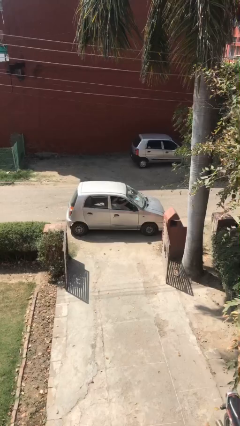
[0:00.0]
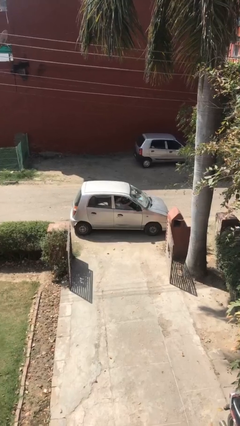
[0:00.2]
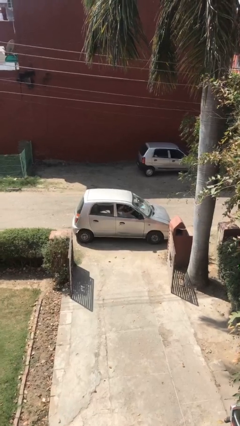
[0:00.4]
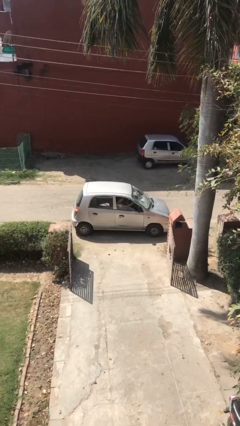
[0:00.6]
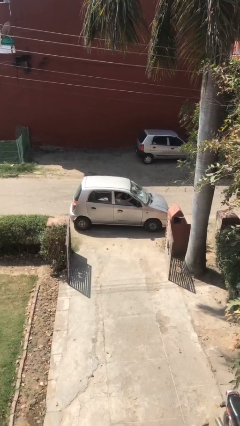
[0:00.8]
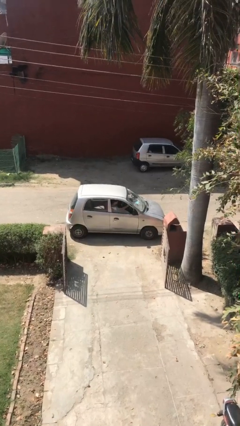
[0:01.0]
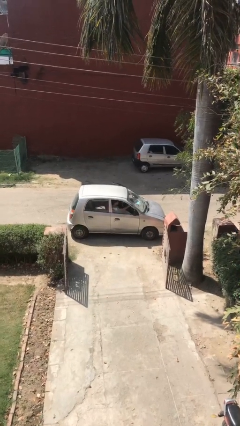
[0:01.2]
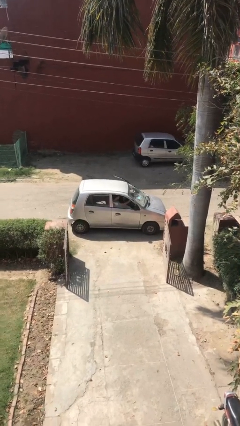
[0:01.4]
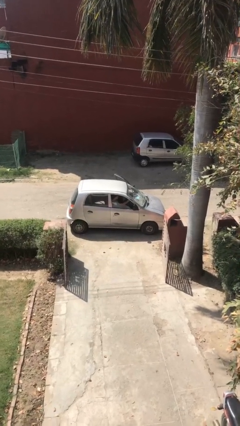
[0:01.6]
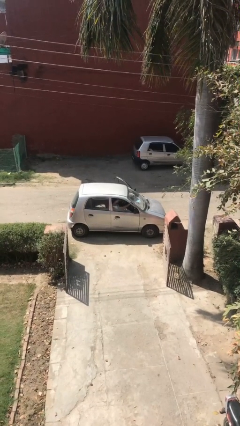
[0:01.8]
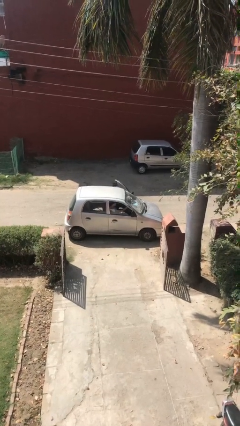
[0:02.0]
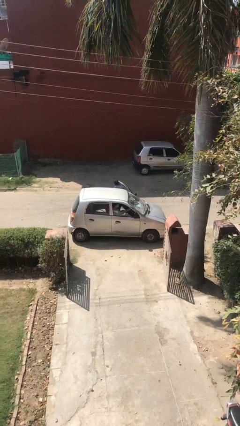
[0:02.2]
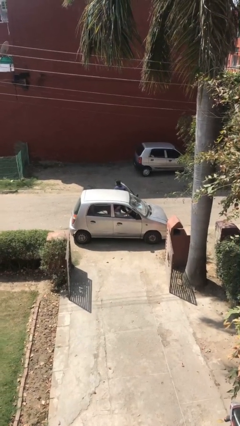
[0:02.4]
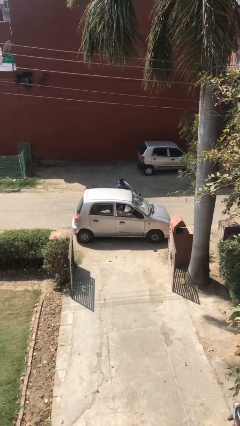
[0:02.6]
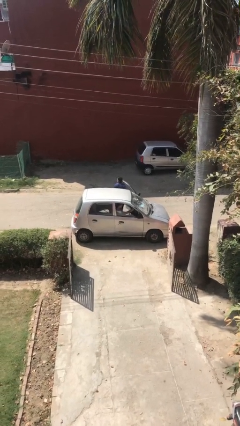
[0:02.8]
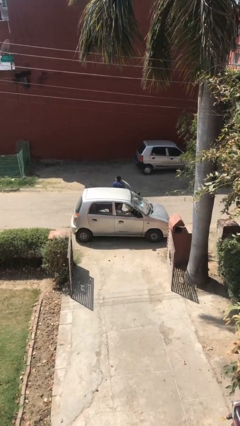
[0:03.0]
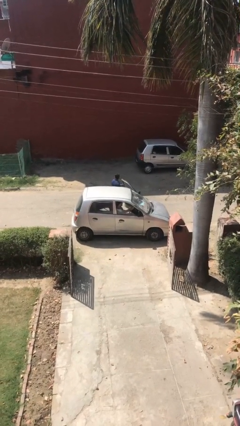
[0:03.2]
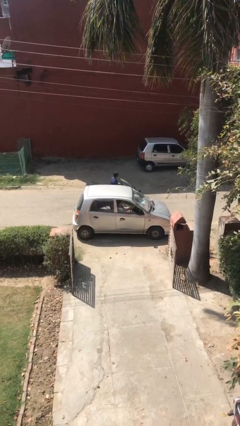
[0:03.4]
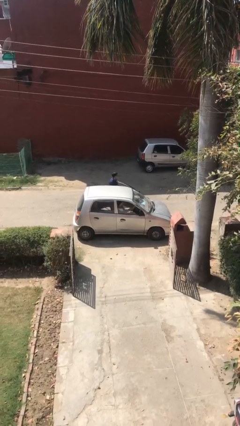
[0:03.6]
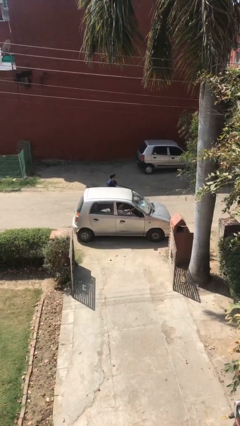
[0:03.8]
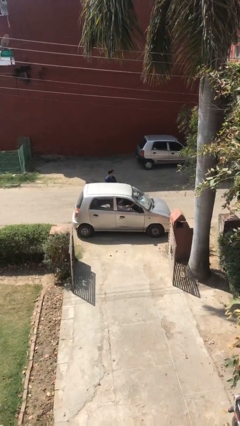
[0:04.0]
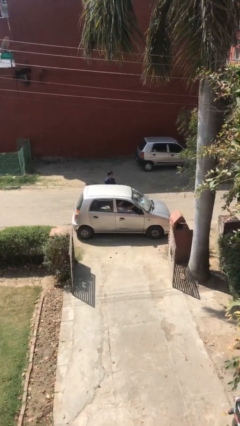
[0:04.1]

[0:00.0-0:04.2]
car drops off person

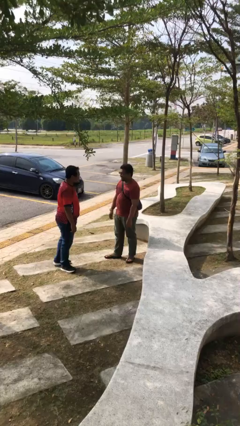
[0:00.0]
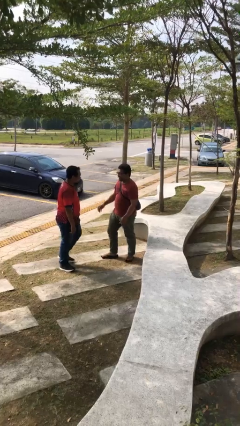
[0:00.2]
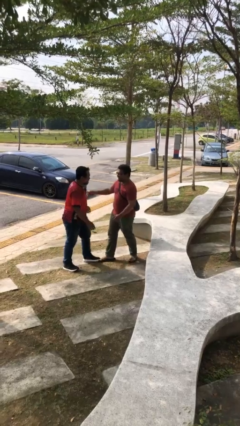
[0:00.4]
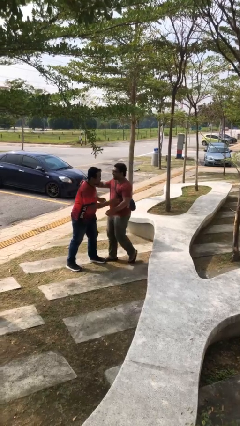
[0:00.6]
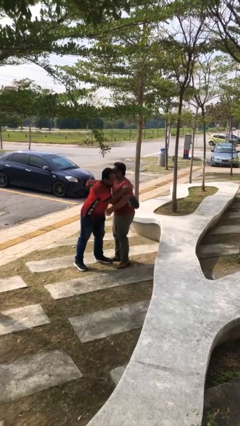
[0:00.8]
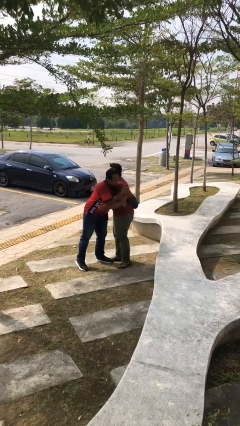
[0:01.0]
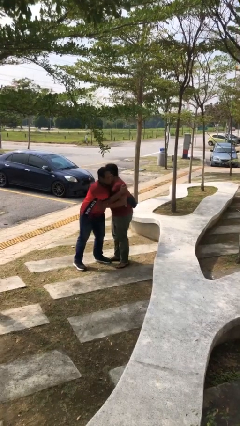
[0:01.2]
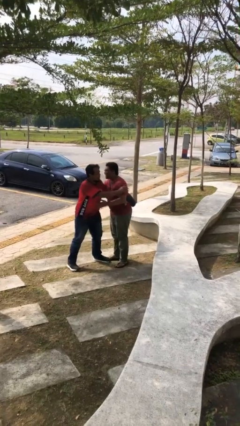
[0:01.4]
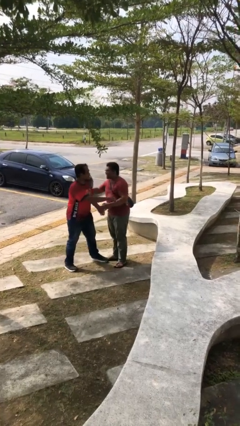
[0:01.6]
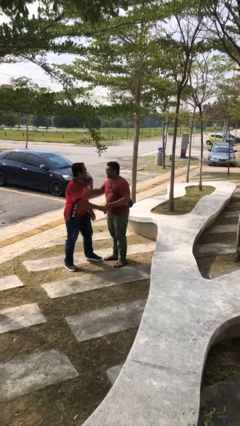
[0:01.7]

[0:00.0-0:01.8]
person embraces person

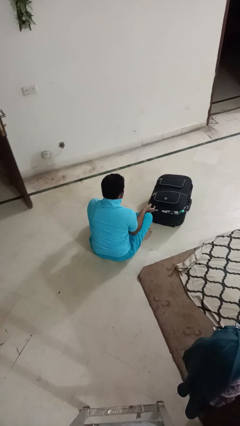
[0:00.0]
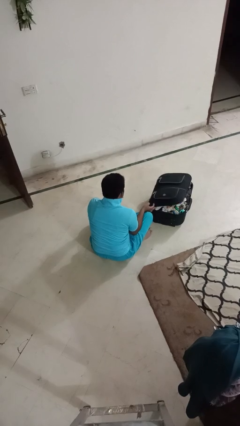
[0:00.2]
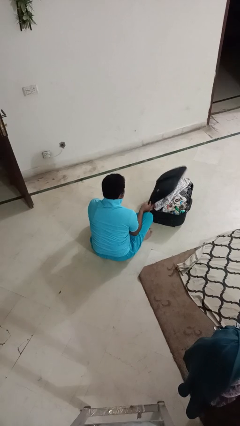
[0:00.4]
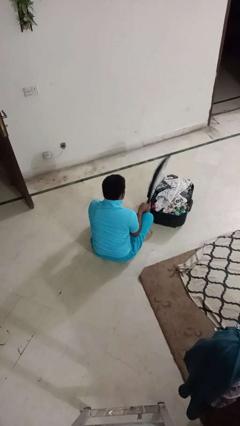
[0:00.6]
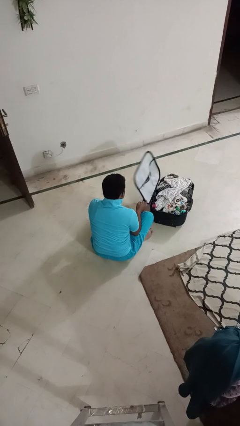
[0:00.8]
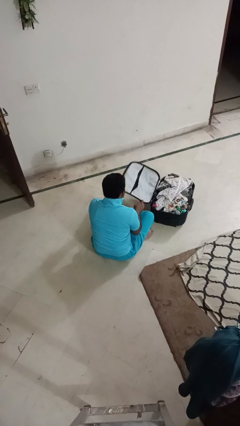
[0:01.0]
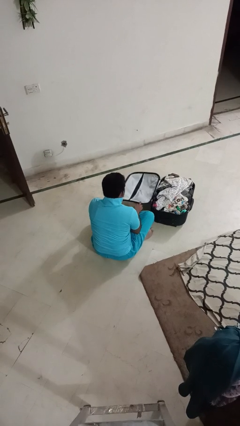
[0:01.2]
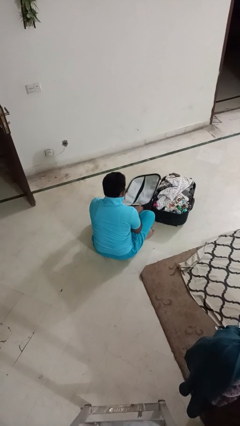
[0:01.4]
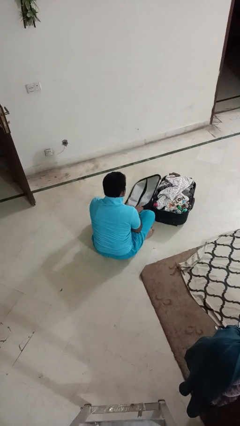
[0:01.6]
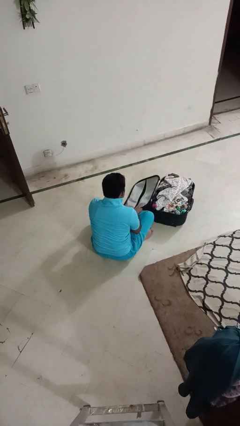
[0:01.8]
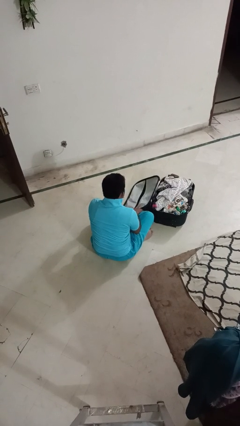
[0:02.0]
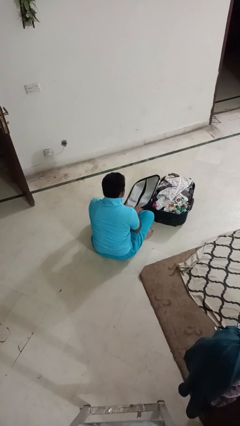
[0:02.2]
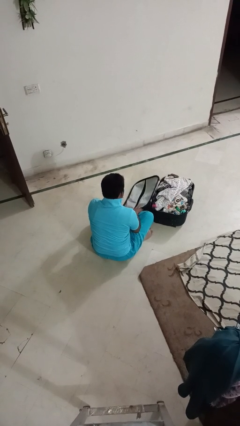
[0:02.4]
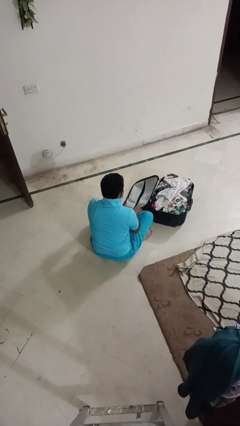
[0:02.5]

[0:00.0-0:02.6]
person opens suitcase

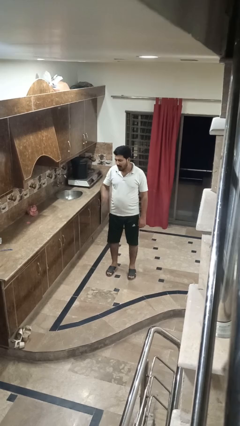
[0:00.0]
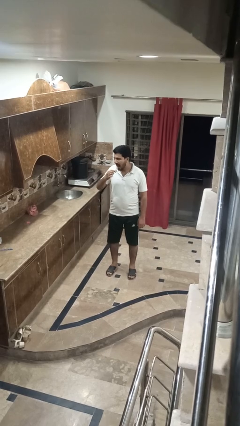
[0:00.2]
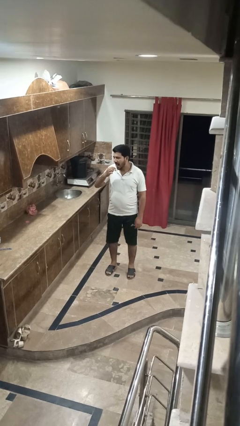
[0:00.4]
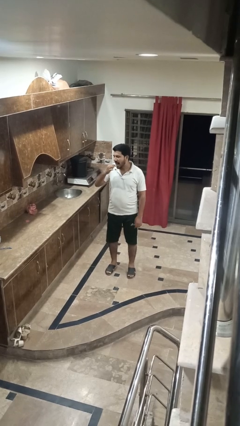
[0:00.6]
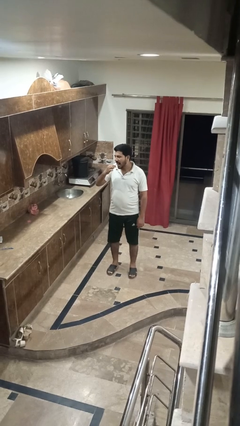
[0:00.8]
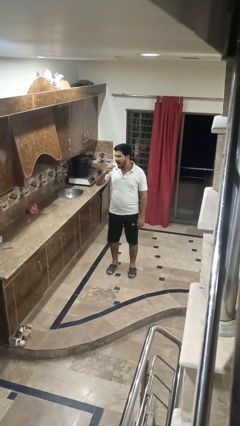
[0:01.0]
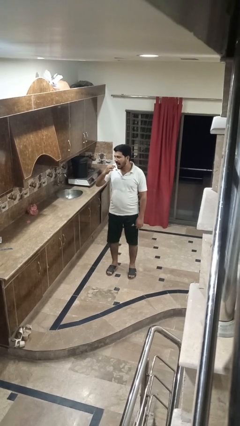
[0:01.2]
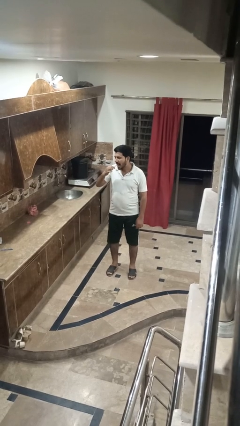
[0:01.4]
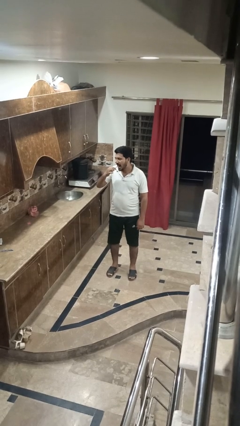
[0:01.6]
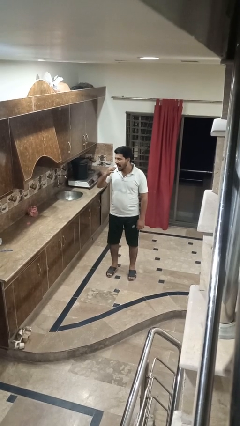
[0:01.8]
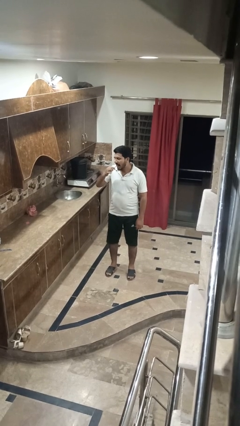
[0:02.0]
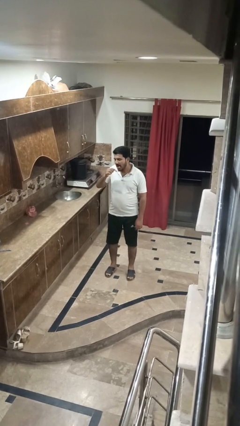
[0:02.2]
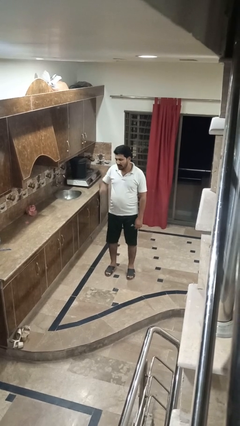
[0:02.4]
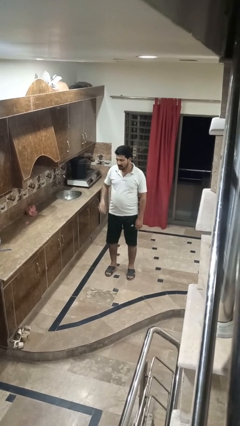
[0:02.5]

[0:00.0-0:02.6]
person brushes teeth

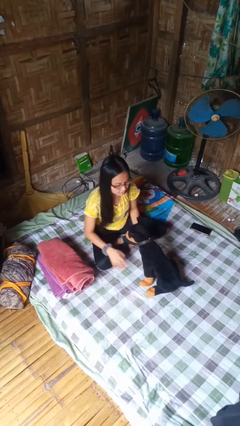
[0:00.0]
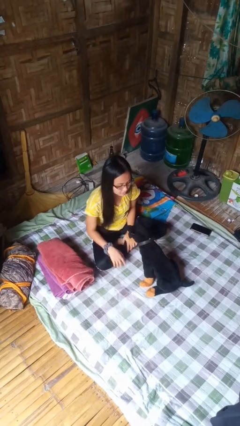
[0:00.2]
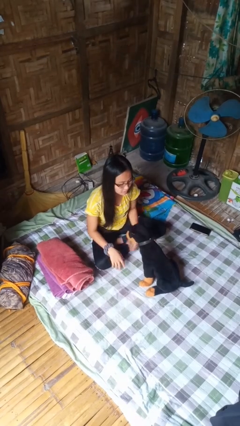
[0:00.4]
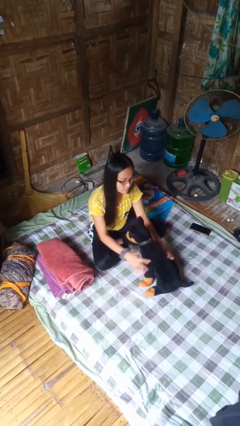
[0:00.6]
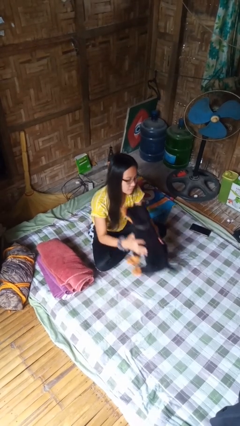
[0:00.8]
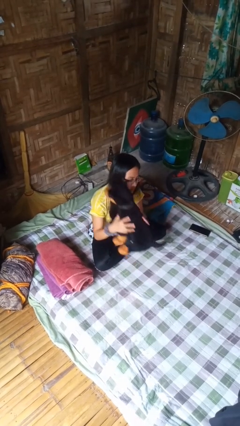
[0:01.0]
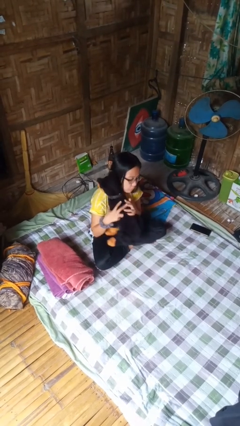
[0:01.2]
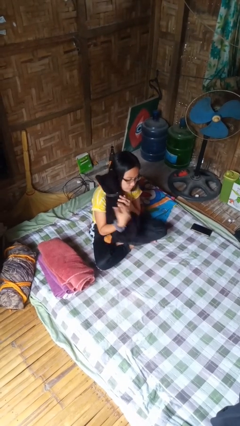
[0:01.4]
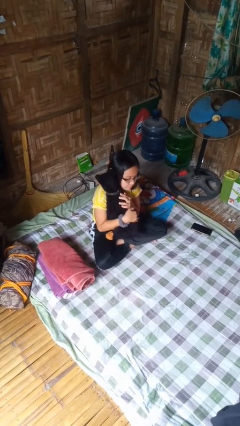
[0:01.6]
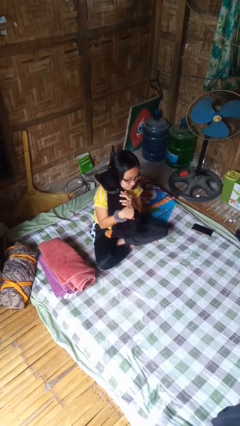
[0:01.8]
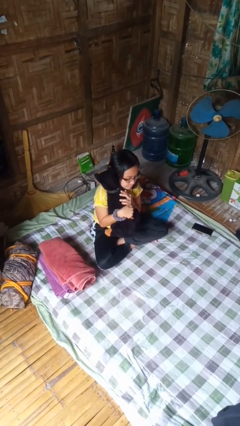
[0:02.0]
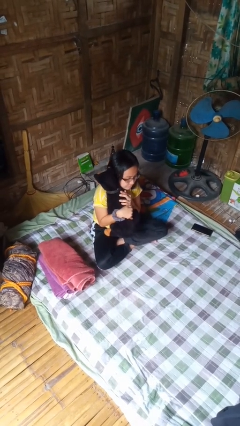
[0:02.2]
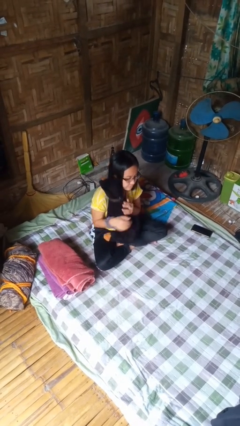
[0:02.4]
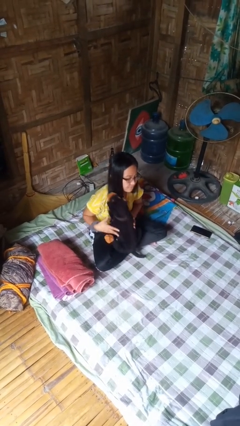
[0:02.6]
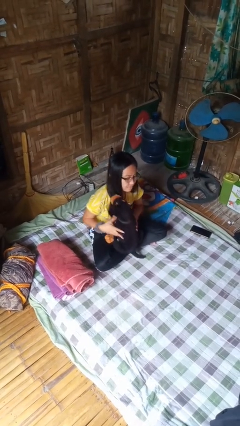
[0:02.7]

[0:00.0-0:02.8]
person hugs stuffed animal

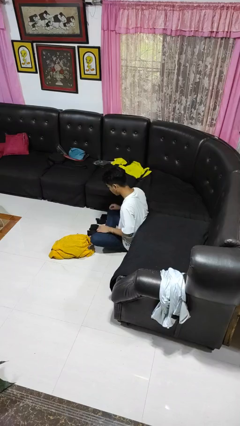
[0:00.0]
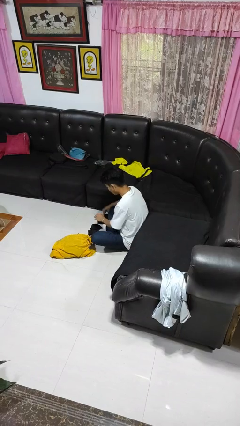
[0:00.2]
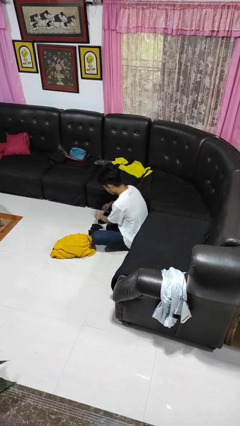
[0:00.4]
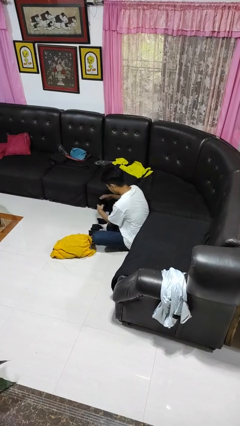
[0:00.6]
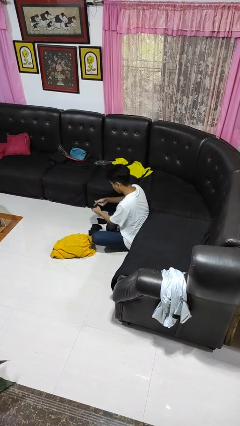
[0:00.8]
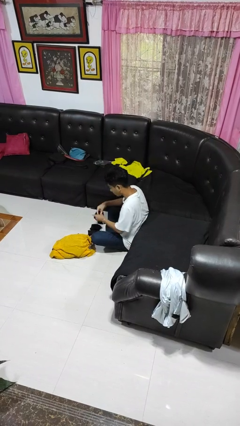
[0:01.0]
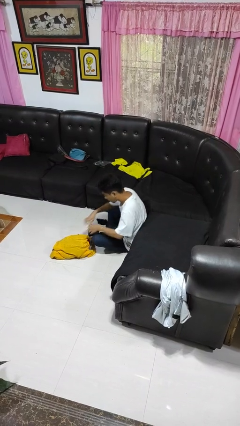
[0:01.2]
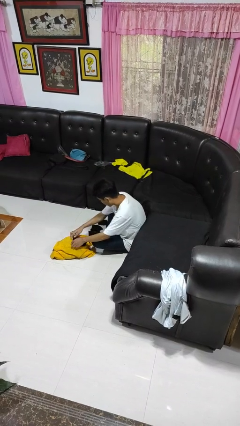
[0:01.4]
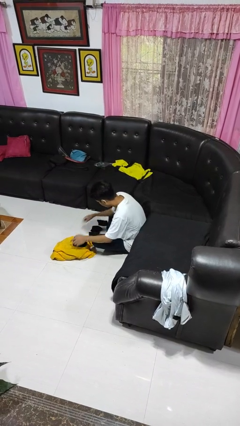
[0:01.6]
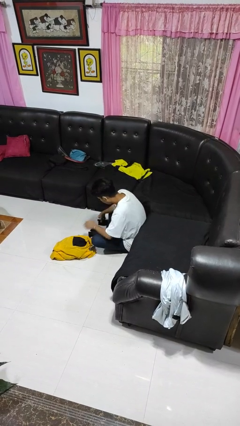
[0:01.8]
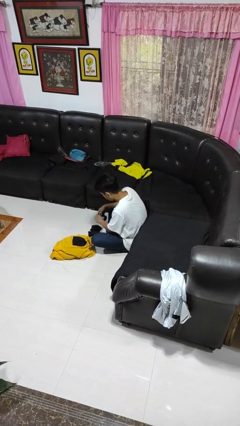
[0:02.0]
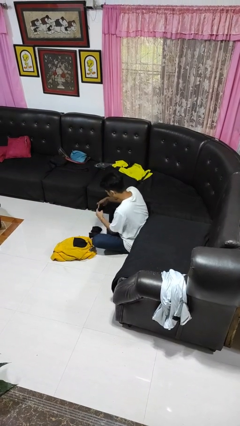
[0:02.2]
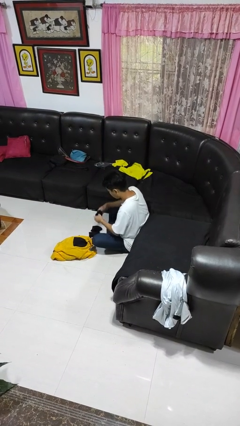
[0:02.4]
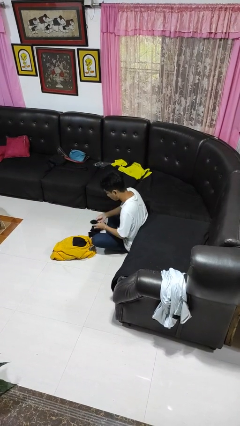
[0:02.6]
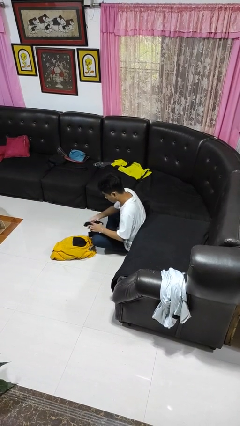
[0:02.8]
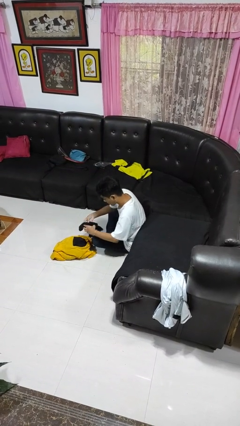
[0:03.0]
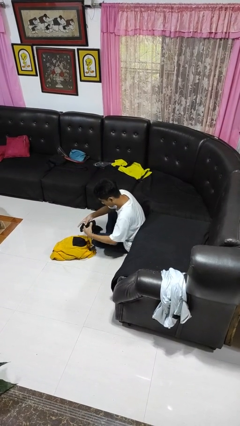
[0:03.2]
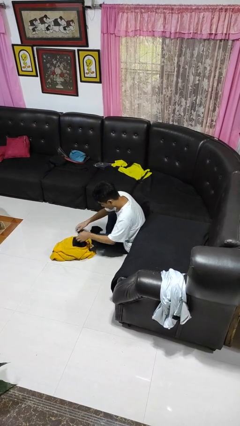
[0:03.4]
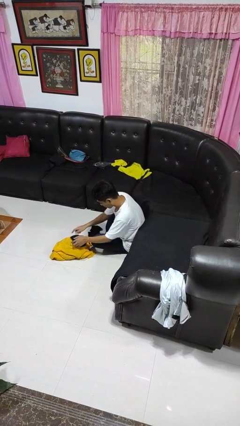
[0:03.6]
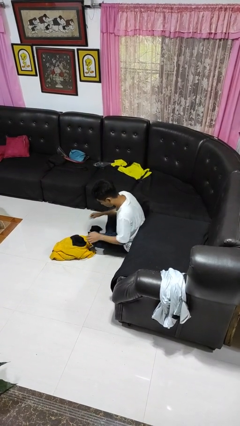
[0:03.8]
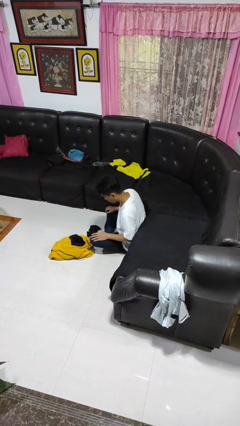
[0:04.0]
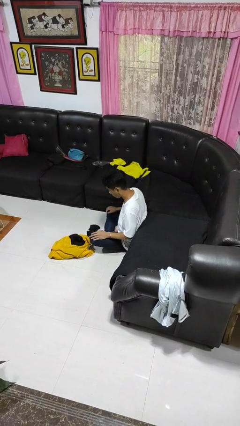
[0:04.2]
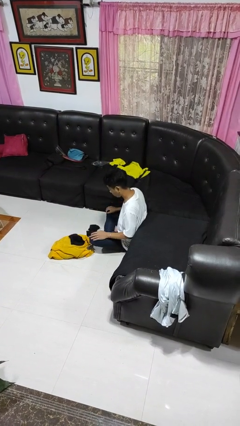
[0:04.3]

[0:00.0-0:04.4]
person folds socks
